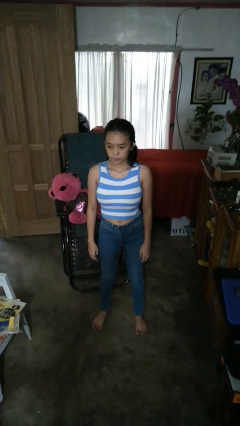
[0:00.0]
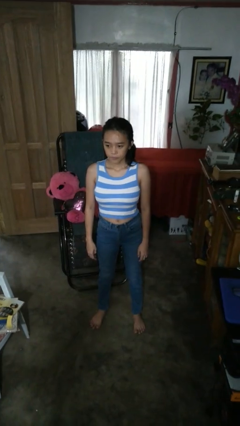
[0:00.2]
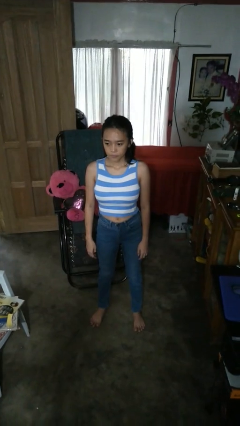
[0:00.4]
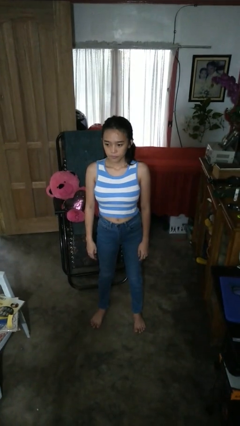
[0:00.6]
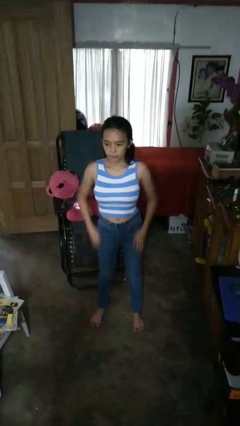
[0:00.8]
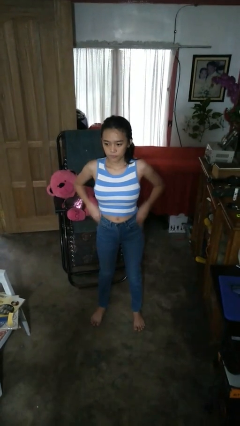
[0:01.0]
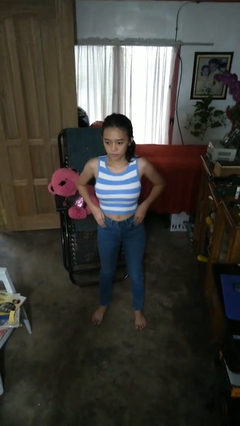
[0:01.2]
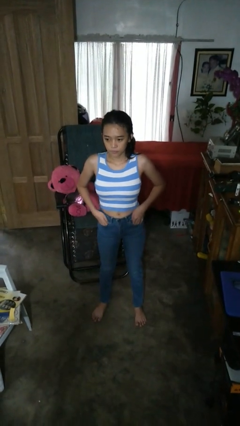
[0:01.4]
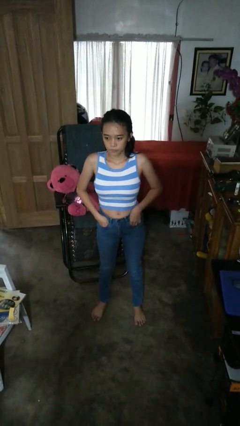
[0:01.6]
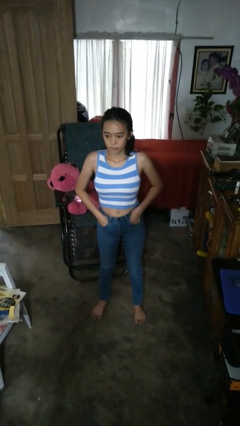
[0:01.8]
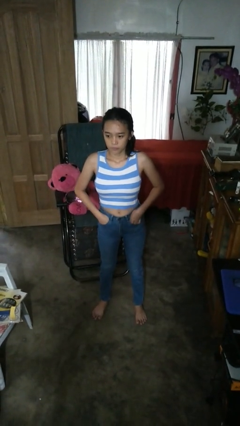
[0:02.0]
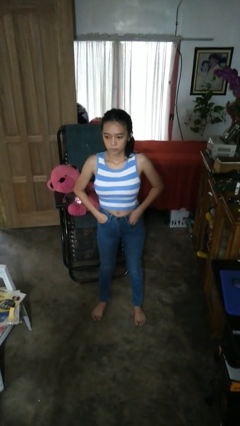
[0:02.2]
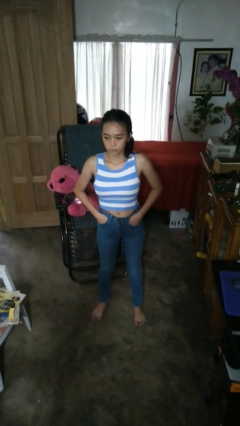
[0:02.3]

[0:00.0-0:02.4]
person puts hands in back pockets

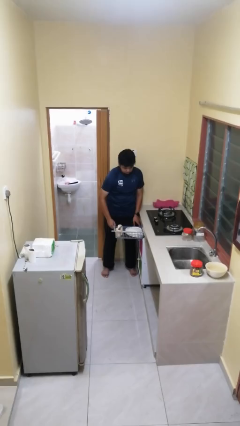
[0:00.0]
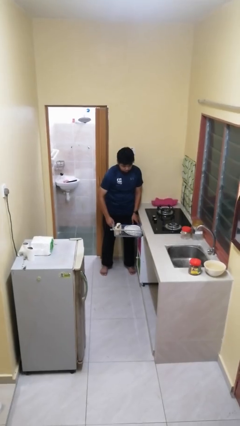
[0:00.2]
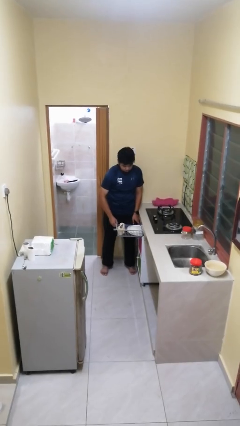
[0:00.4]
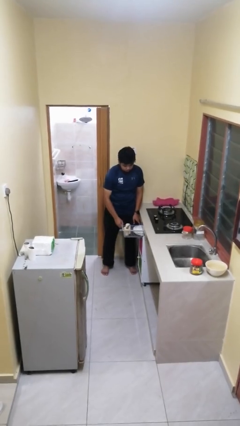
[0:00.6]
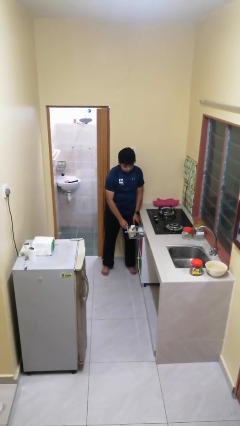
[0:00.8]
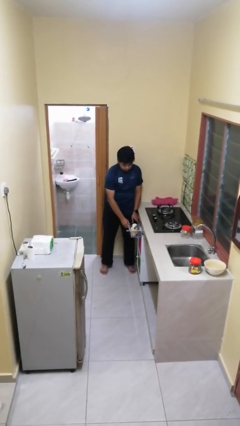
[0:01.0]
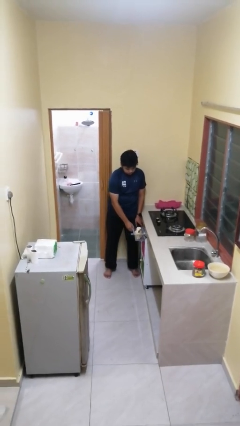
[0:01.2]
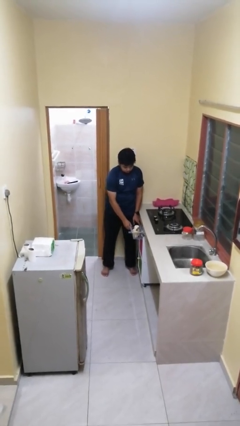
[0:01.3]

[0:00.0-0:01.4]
person closes kitchen drawer

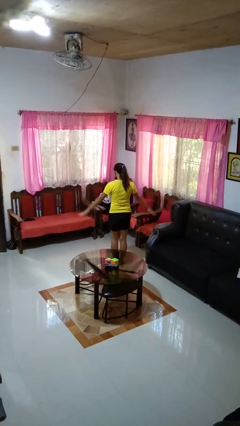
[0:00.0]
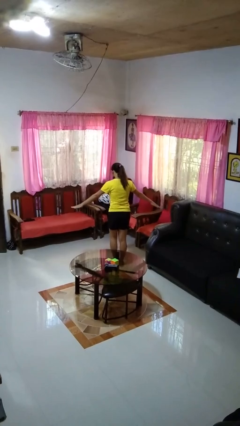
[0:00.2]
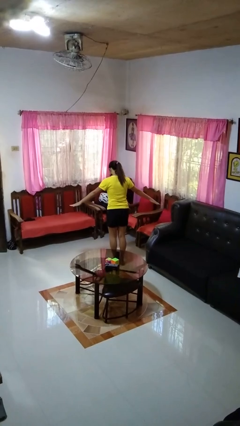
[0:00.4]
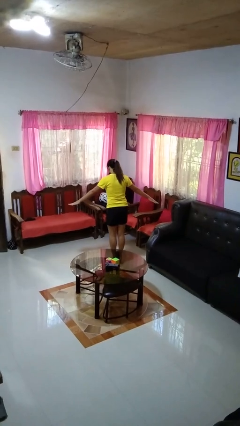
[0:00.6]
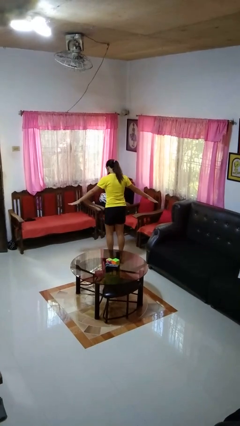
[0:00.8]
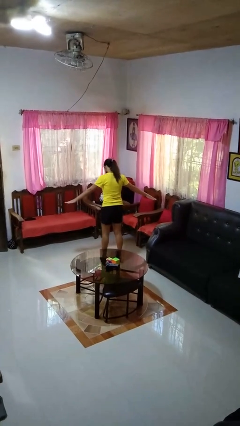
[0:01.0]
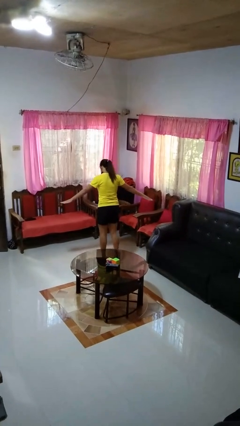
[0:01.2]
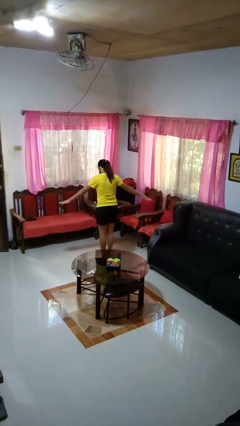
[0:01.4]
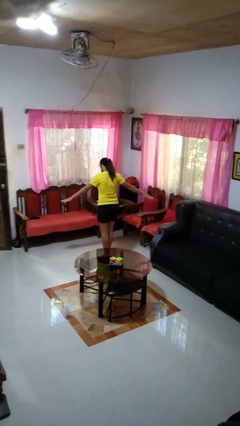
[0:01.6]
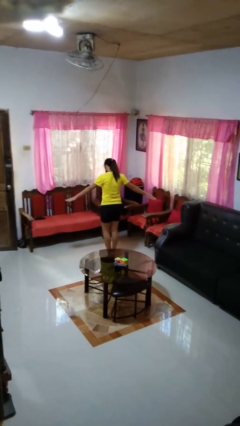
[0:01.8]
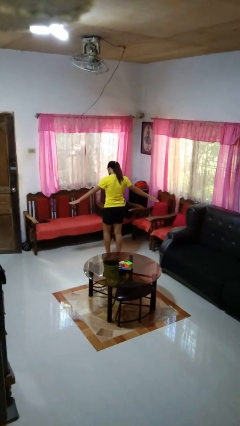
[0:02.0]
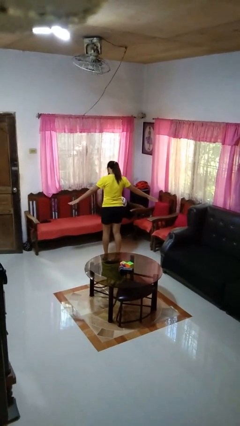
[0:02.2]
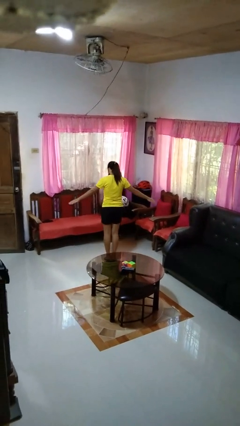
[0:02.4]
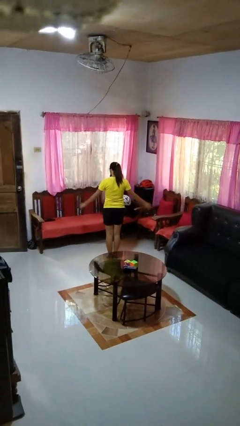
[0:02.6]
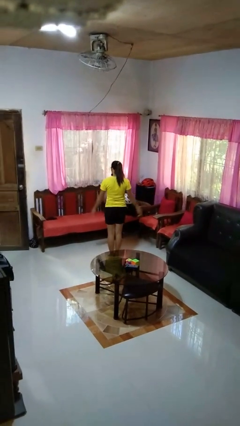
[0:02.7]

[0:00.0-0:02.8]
person walks tiptoe

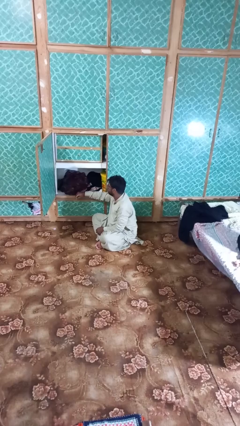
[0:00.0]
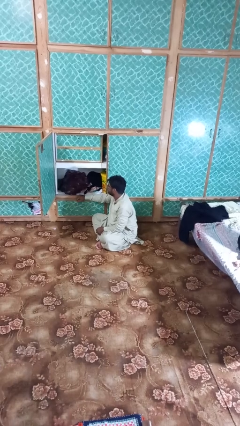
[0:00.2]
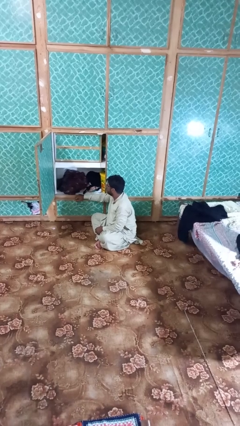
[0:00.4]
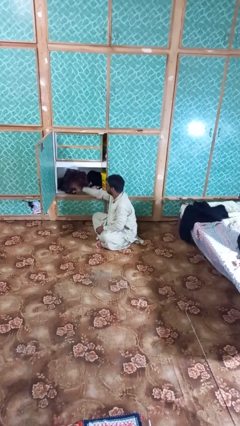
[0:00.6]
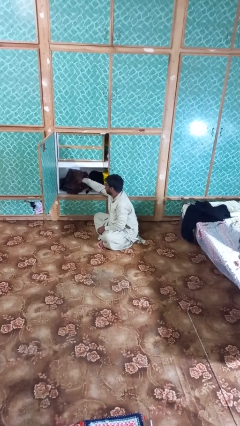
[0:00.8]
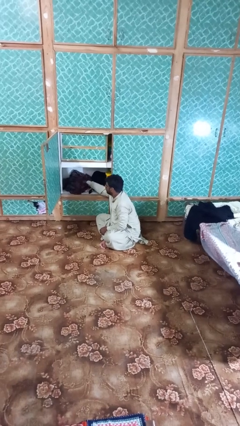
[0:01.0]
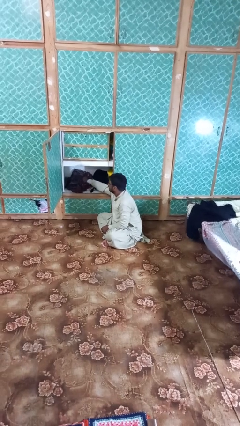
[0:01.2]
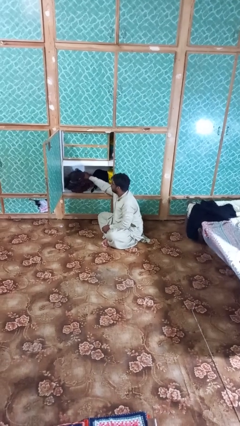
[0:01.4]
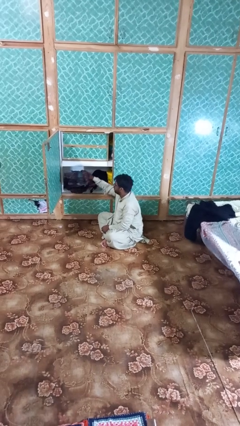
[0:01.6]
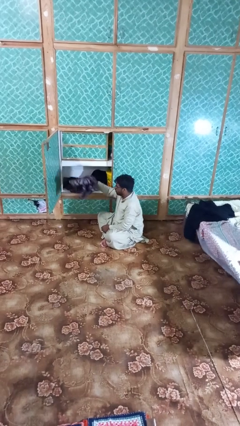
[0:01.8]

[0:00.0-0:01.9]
person takes clothes from dresser

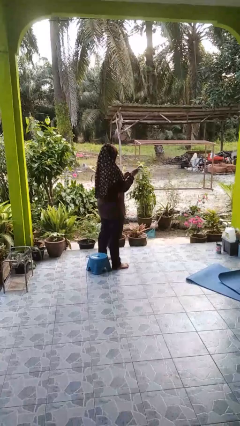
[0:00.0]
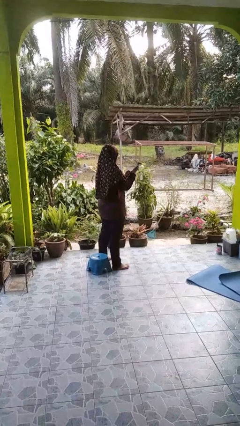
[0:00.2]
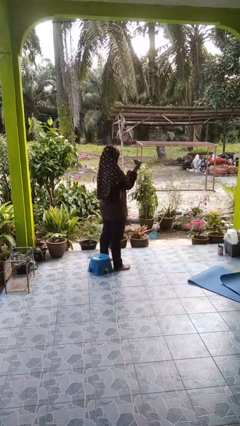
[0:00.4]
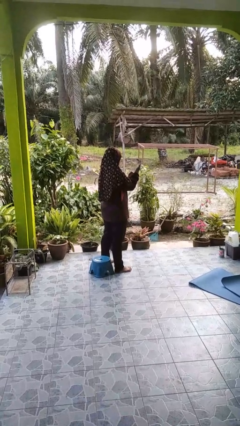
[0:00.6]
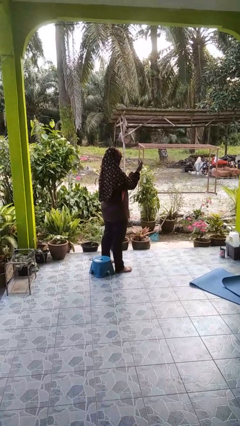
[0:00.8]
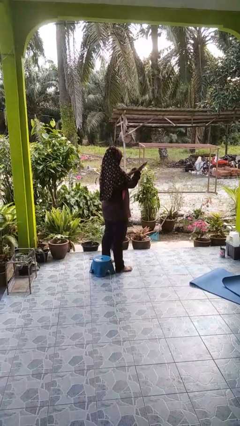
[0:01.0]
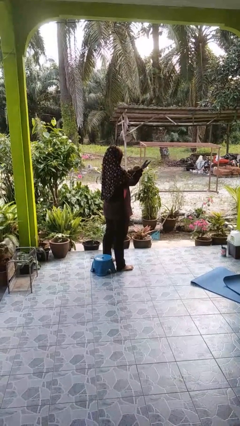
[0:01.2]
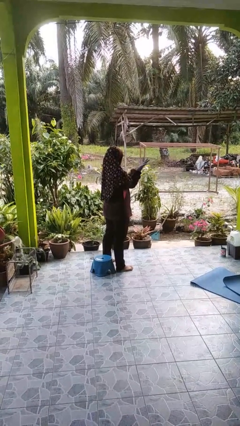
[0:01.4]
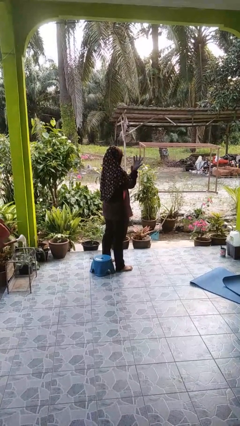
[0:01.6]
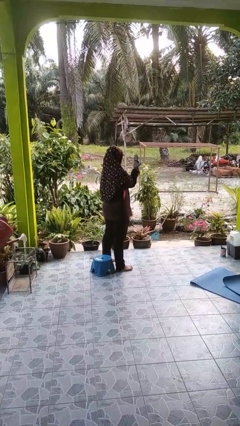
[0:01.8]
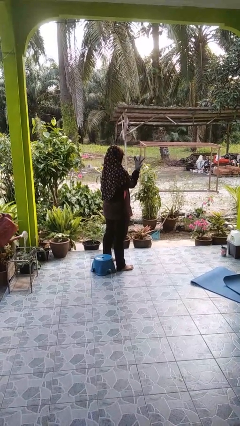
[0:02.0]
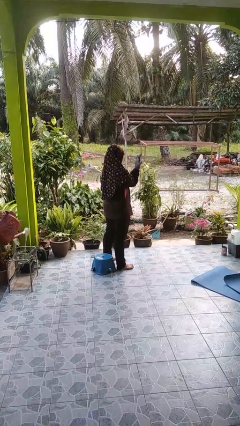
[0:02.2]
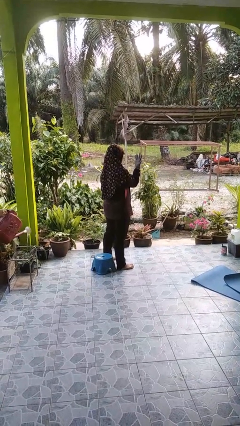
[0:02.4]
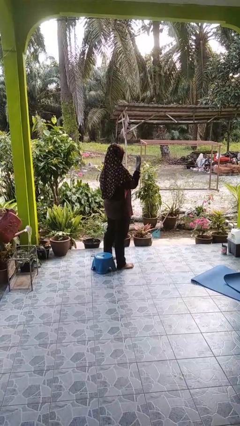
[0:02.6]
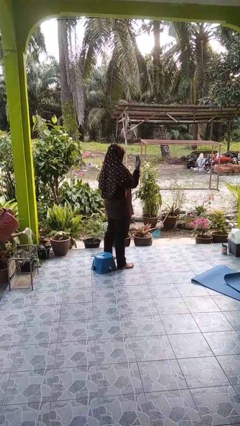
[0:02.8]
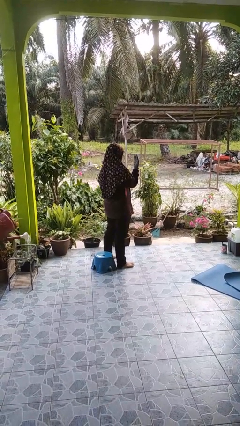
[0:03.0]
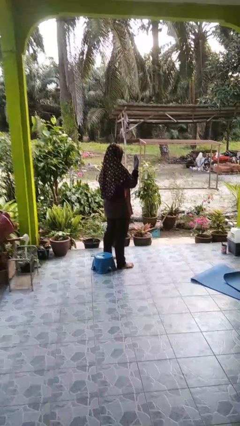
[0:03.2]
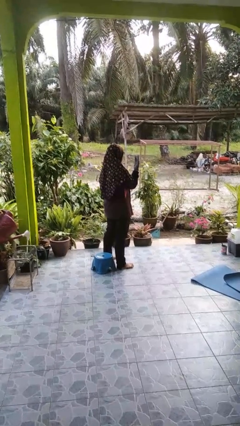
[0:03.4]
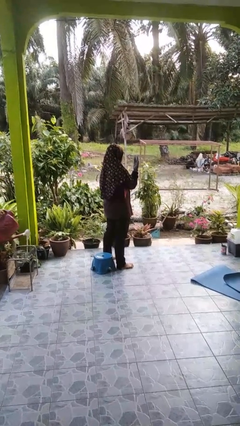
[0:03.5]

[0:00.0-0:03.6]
person puts on gloves

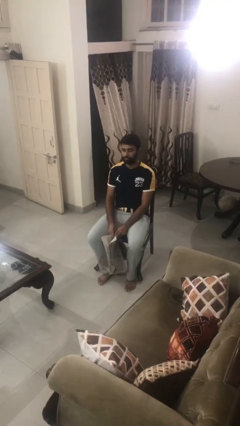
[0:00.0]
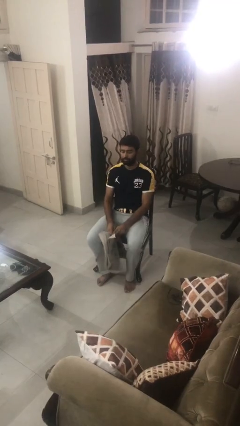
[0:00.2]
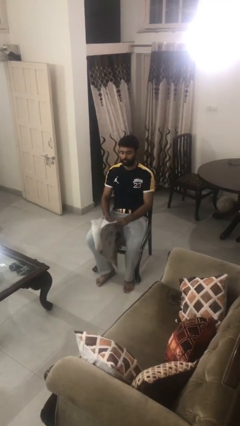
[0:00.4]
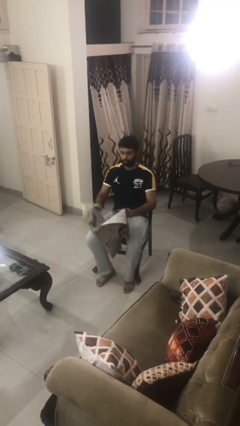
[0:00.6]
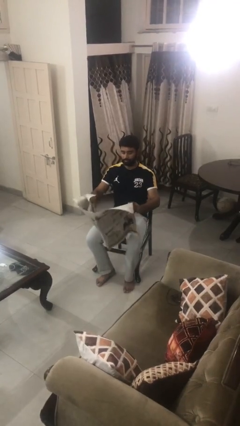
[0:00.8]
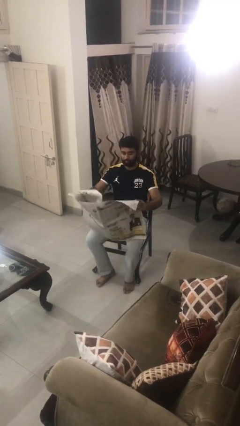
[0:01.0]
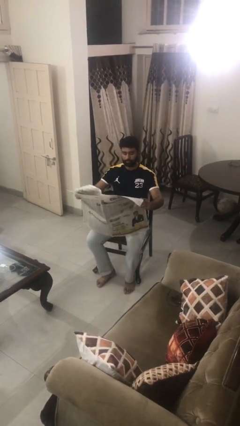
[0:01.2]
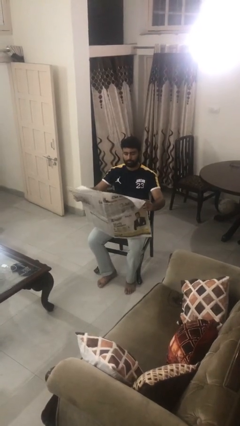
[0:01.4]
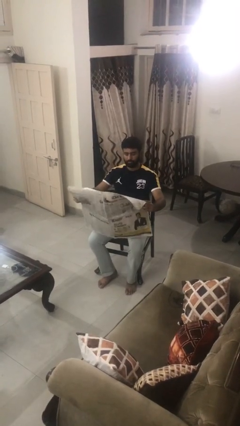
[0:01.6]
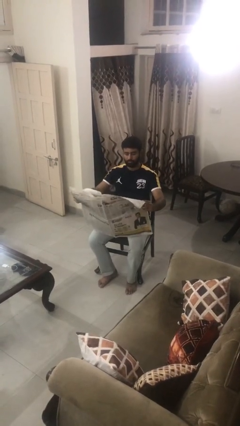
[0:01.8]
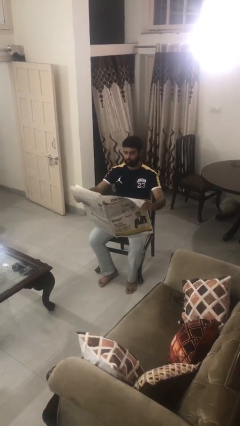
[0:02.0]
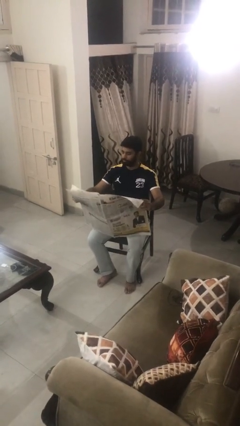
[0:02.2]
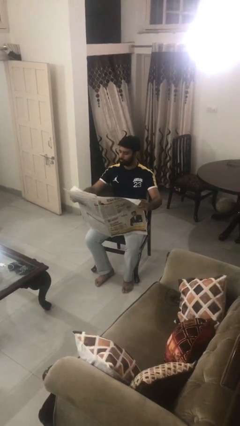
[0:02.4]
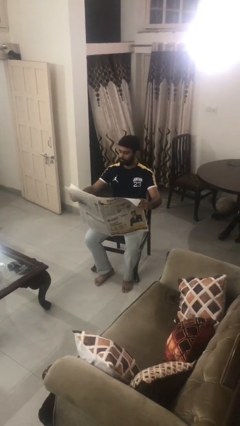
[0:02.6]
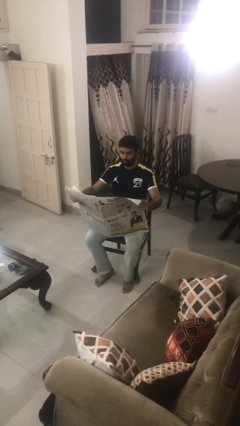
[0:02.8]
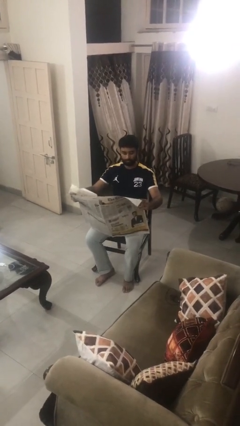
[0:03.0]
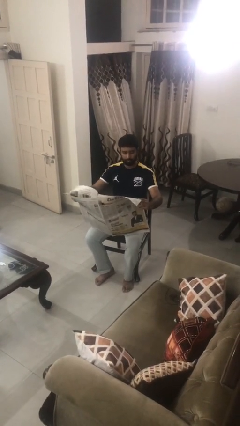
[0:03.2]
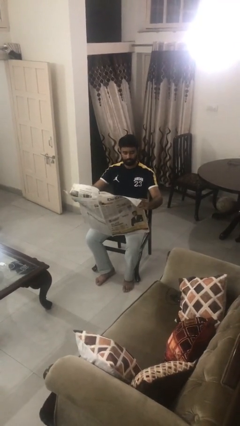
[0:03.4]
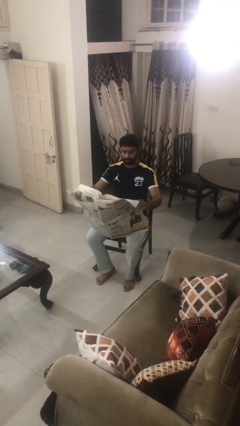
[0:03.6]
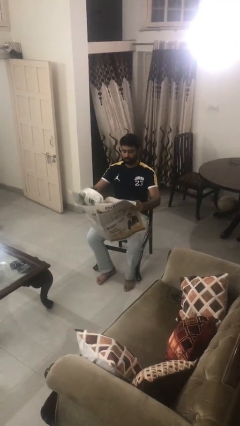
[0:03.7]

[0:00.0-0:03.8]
person reads newspaper

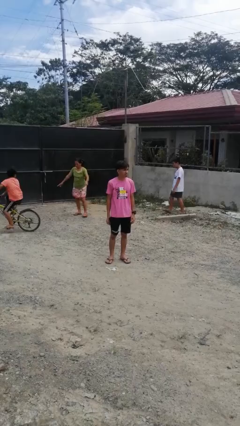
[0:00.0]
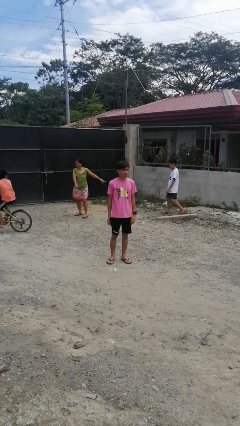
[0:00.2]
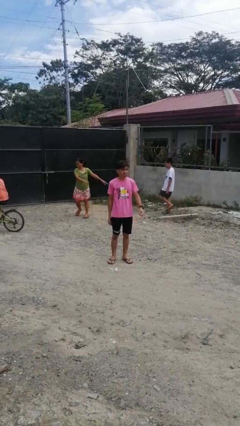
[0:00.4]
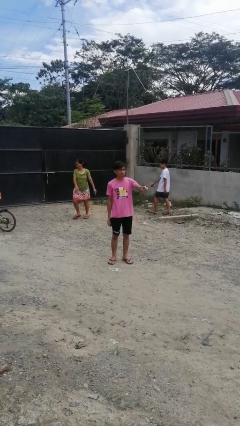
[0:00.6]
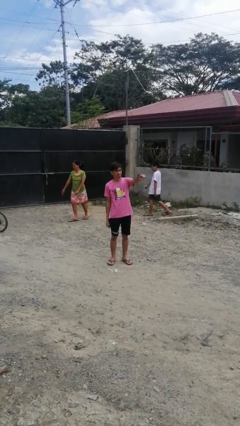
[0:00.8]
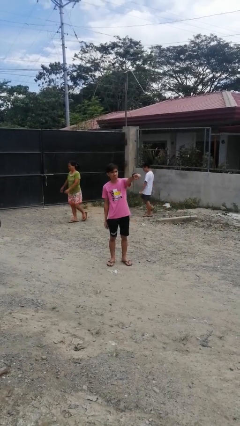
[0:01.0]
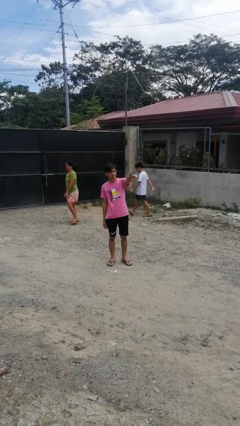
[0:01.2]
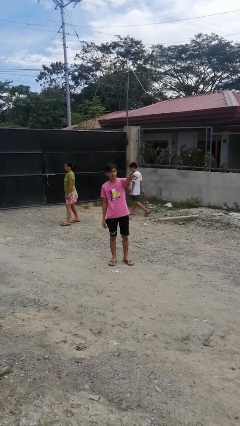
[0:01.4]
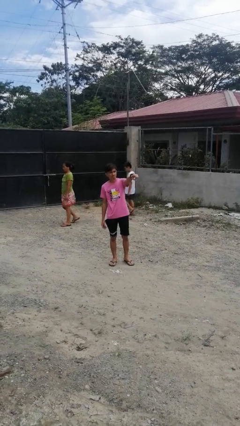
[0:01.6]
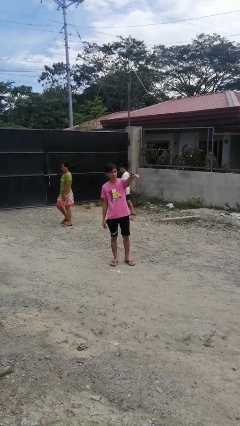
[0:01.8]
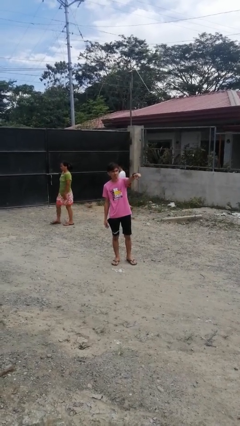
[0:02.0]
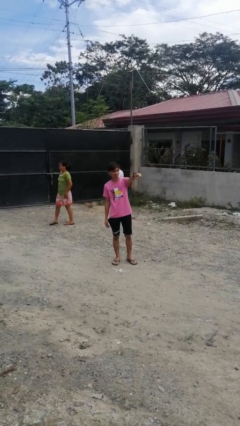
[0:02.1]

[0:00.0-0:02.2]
person points at person
